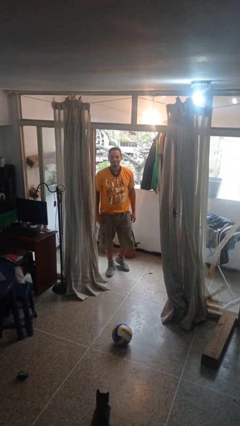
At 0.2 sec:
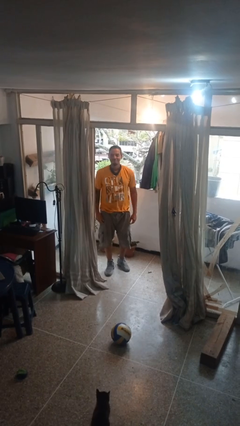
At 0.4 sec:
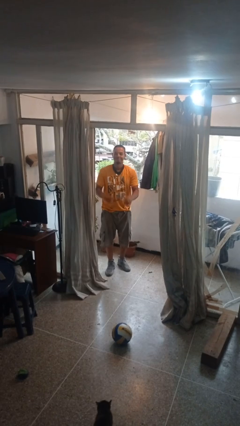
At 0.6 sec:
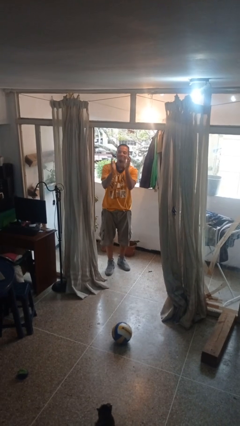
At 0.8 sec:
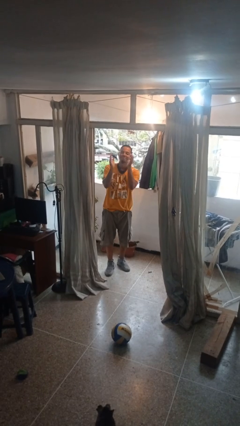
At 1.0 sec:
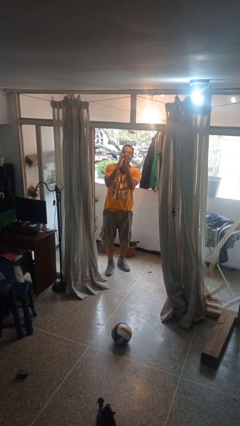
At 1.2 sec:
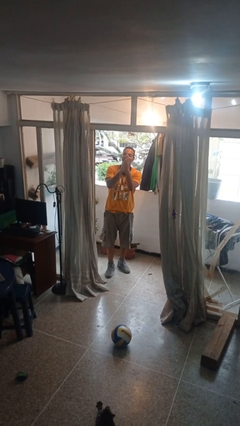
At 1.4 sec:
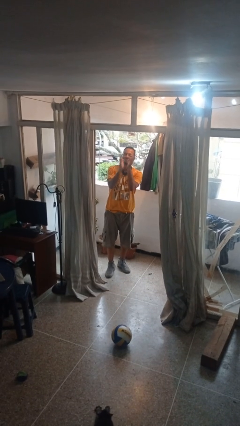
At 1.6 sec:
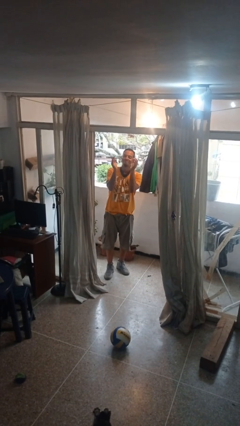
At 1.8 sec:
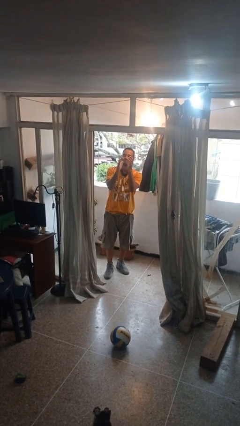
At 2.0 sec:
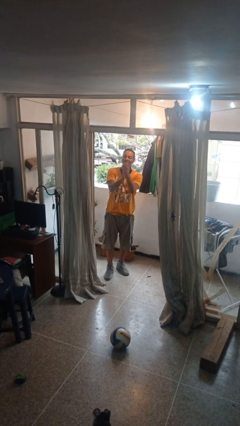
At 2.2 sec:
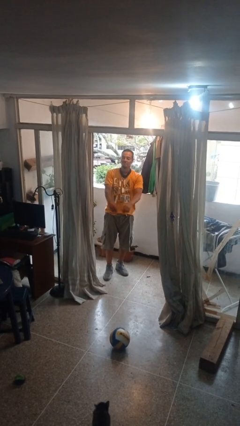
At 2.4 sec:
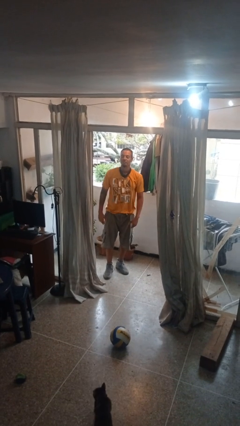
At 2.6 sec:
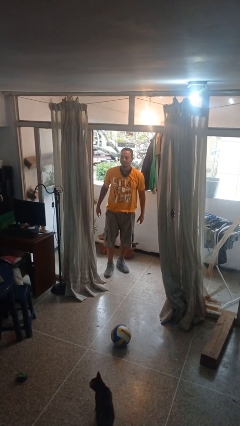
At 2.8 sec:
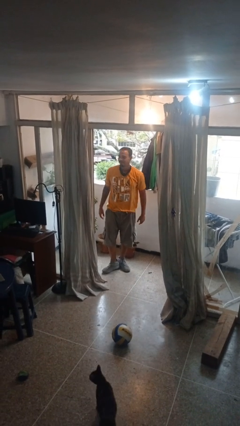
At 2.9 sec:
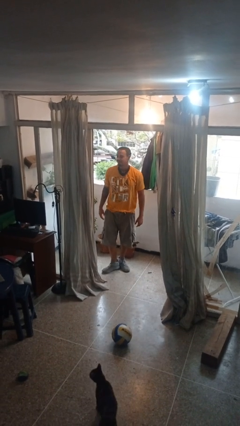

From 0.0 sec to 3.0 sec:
person claps hands

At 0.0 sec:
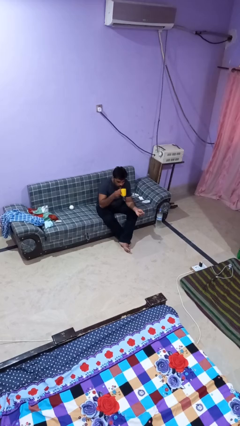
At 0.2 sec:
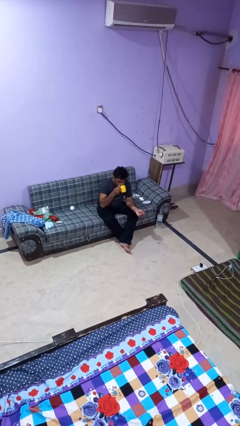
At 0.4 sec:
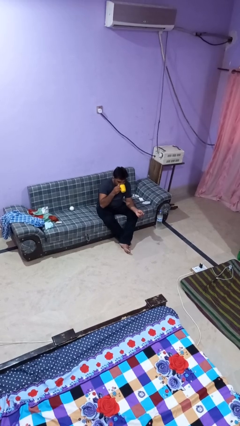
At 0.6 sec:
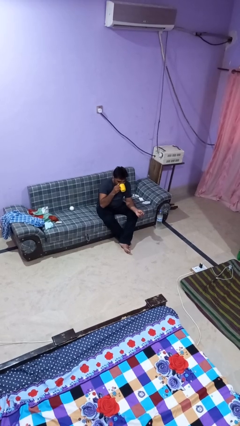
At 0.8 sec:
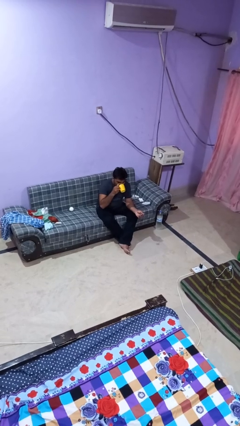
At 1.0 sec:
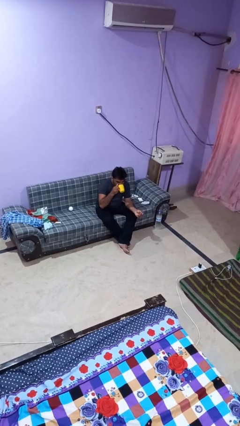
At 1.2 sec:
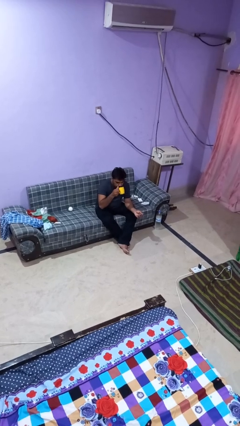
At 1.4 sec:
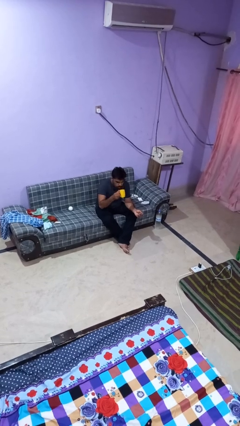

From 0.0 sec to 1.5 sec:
person drinks from mug

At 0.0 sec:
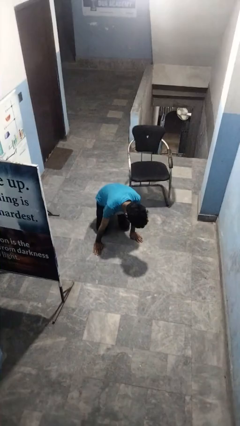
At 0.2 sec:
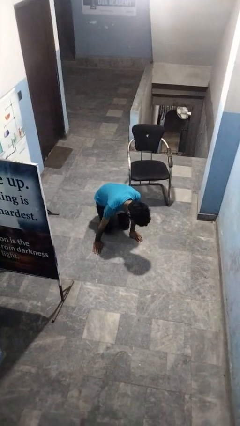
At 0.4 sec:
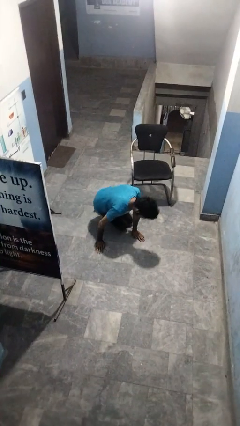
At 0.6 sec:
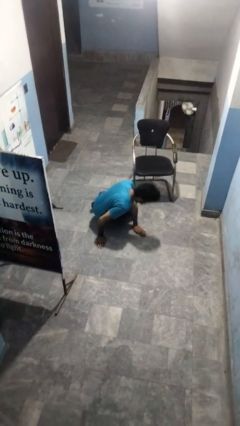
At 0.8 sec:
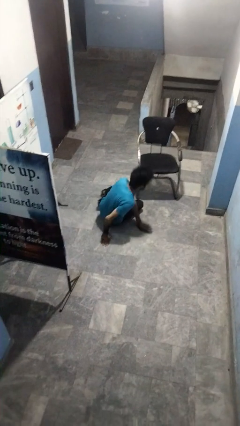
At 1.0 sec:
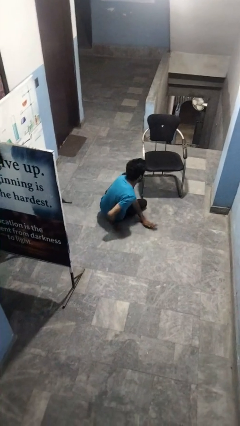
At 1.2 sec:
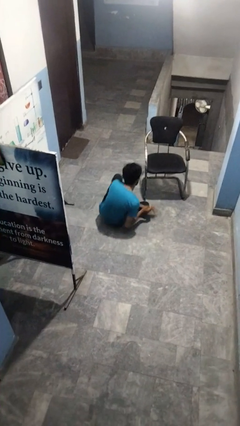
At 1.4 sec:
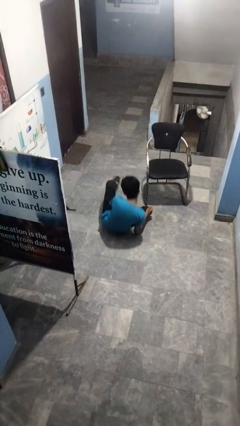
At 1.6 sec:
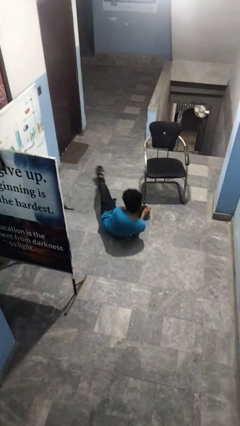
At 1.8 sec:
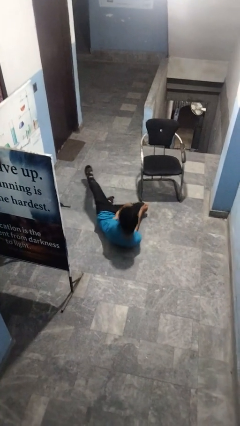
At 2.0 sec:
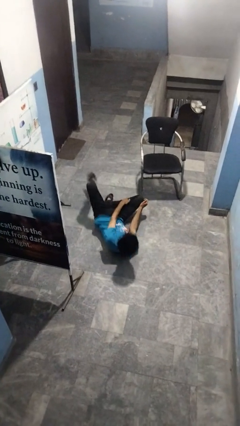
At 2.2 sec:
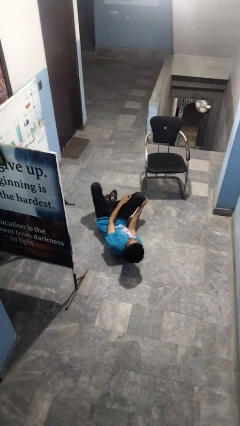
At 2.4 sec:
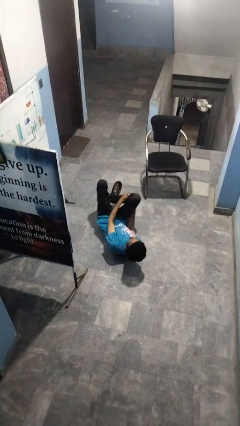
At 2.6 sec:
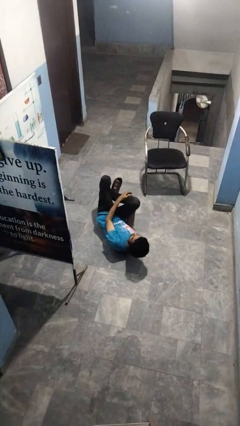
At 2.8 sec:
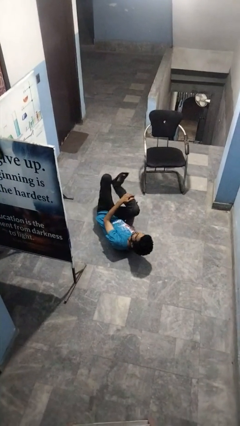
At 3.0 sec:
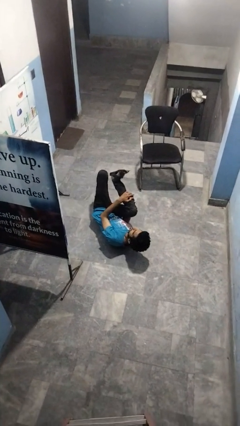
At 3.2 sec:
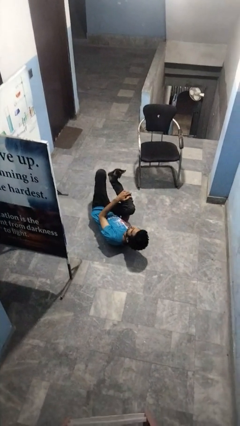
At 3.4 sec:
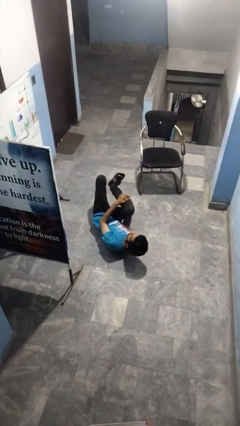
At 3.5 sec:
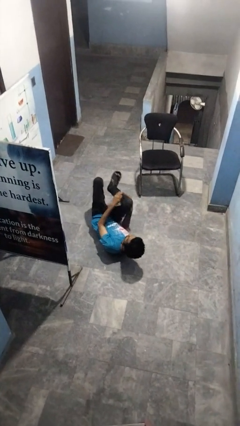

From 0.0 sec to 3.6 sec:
person lies down on floor

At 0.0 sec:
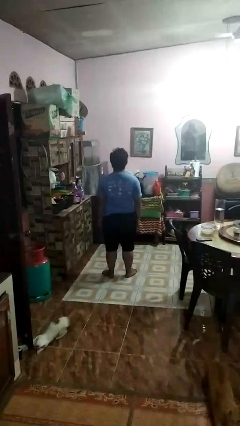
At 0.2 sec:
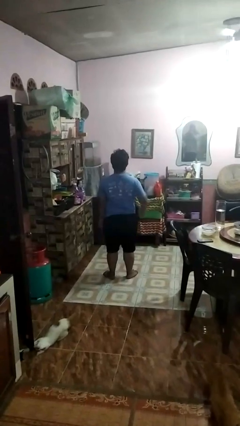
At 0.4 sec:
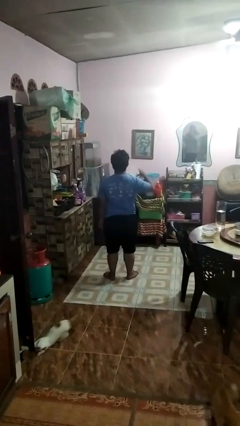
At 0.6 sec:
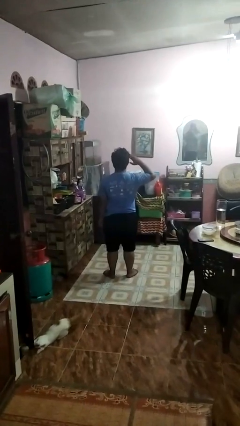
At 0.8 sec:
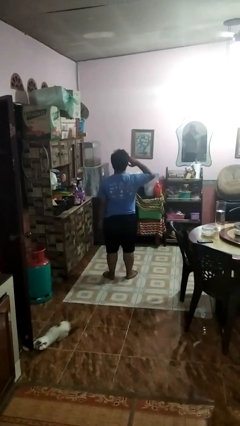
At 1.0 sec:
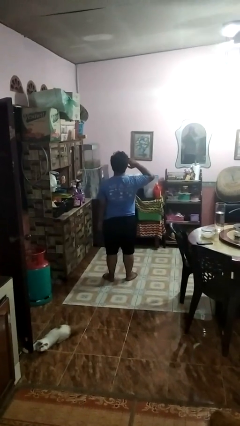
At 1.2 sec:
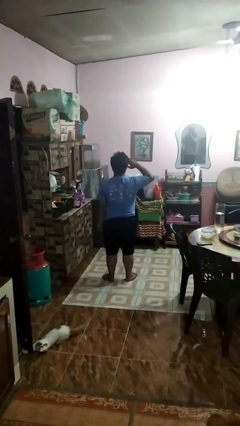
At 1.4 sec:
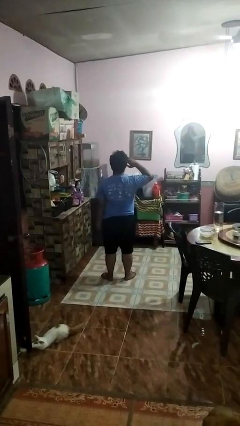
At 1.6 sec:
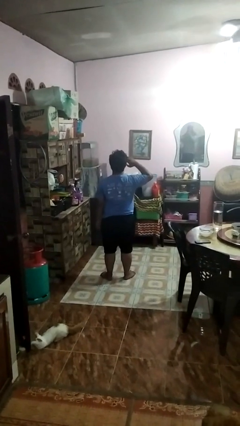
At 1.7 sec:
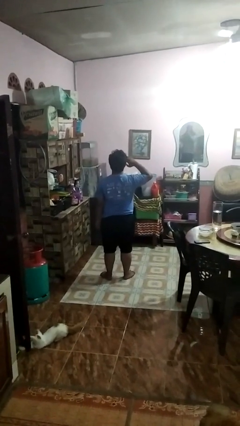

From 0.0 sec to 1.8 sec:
person salutes

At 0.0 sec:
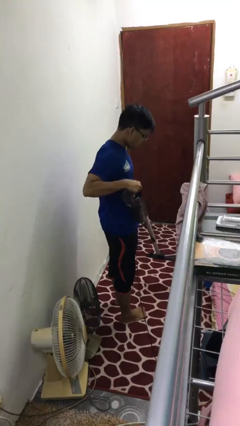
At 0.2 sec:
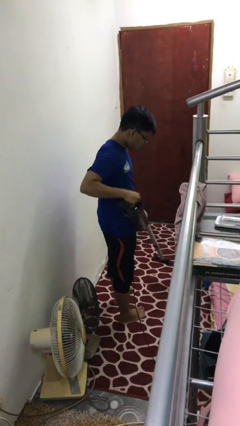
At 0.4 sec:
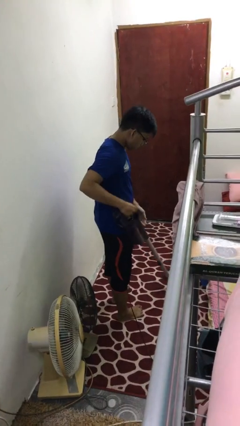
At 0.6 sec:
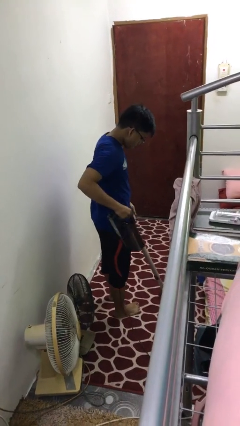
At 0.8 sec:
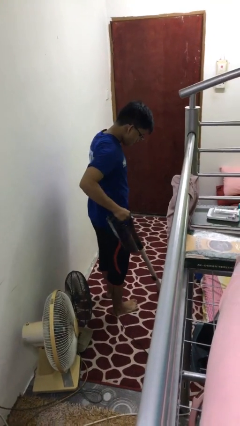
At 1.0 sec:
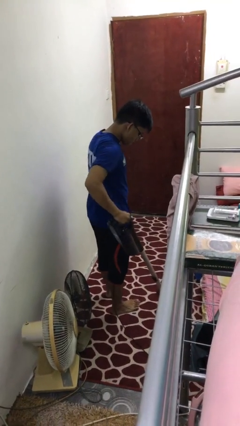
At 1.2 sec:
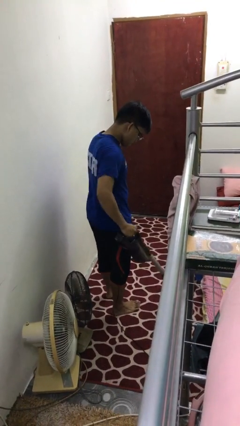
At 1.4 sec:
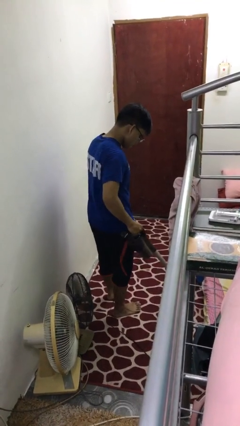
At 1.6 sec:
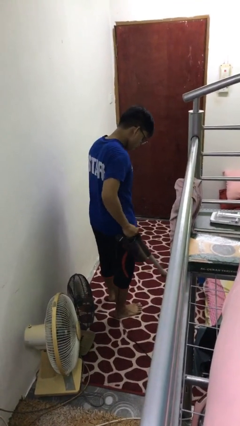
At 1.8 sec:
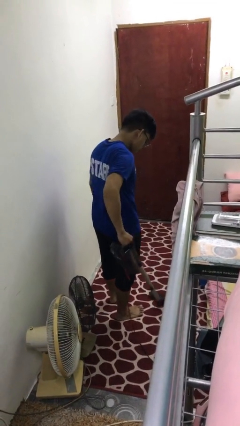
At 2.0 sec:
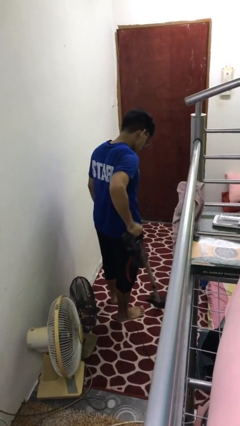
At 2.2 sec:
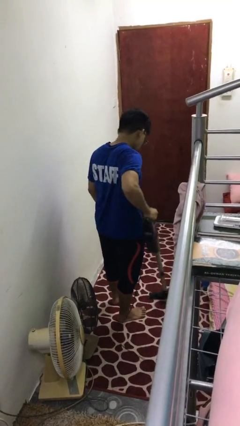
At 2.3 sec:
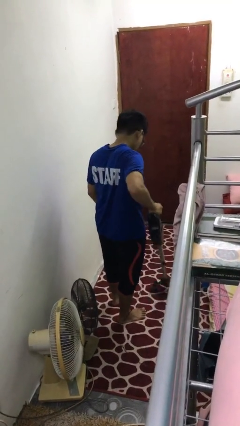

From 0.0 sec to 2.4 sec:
person vacuums carpet

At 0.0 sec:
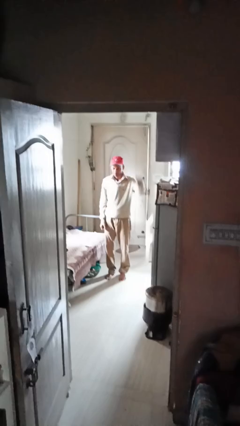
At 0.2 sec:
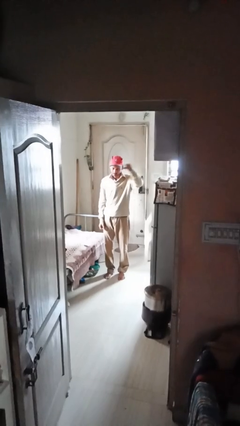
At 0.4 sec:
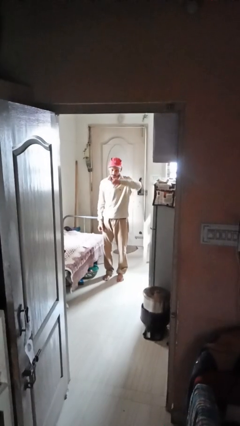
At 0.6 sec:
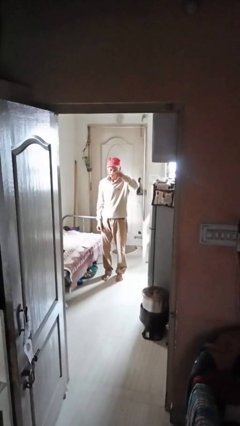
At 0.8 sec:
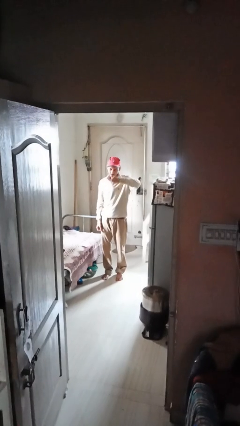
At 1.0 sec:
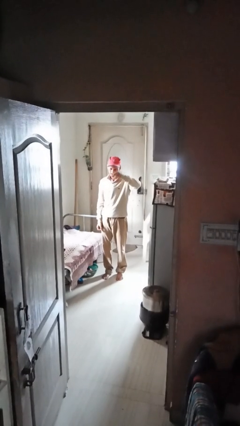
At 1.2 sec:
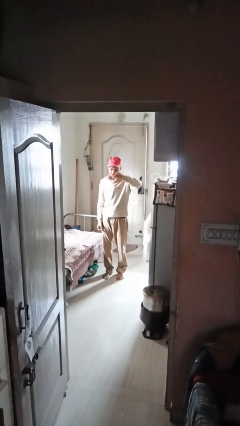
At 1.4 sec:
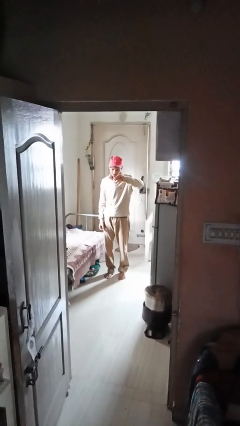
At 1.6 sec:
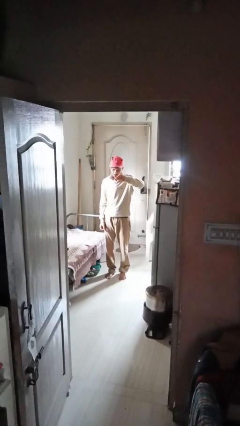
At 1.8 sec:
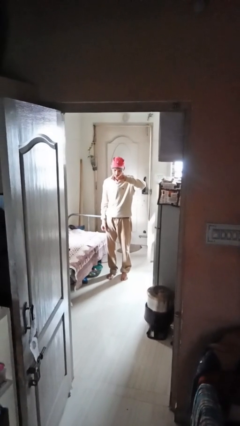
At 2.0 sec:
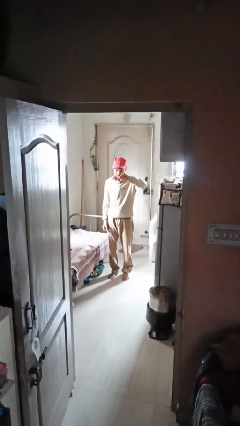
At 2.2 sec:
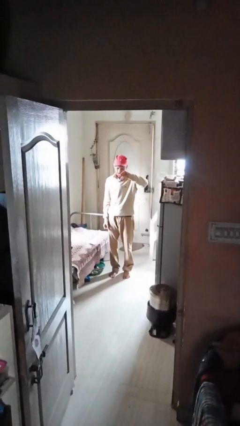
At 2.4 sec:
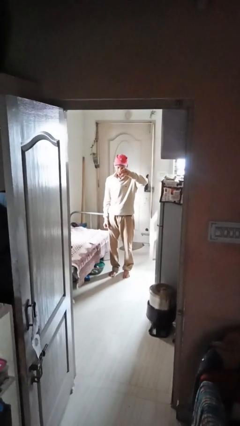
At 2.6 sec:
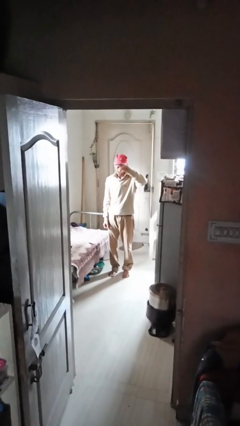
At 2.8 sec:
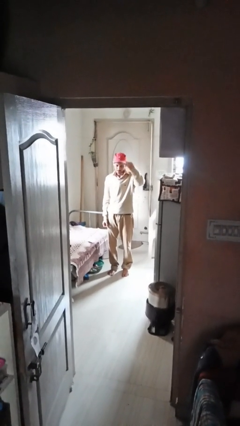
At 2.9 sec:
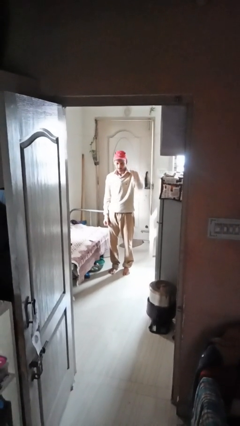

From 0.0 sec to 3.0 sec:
person gestures thumbs down

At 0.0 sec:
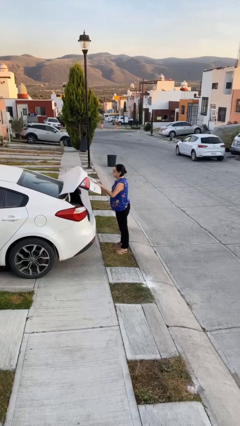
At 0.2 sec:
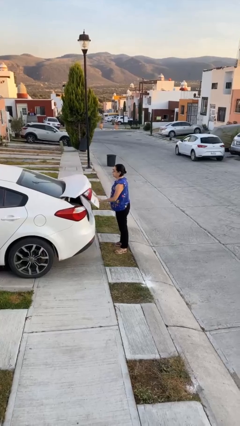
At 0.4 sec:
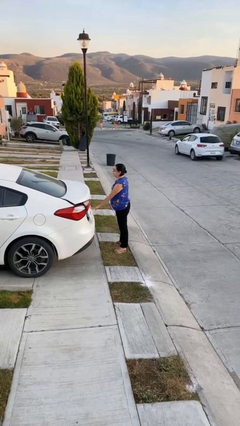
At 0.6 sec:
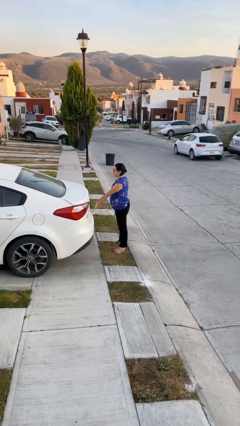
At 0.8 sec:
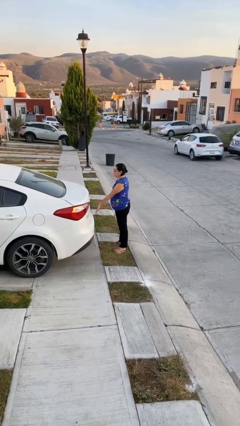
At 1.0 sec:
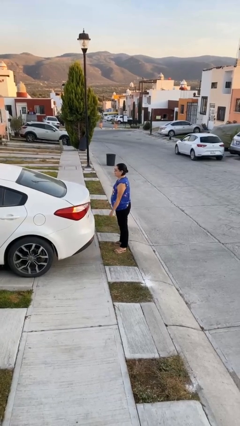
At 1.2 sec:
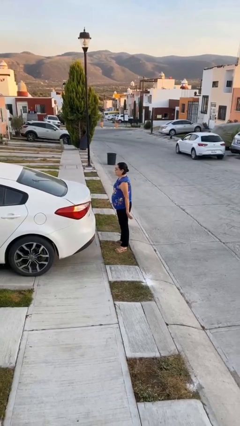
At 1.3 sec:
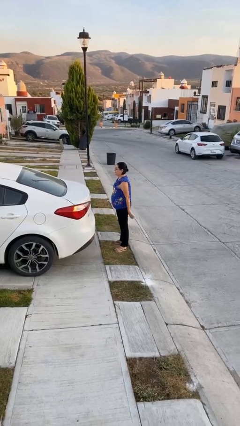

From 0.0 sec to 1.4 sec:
person closes car trunk

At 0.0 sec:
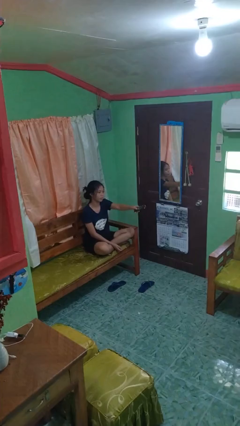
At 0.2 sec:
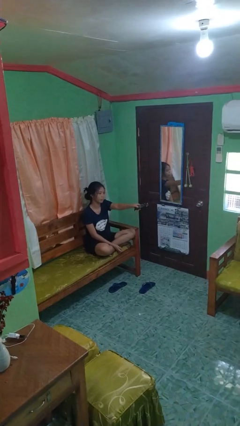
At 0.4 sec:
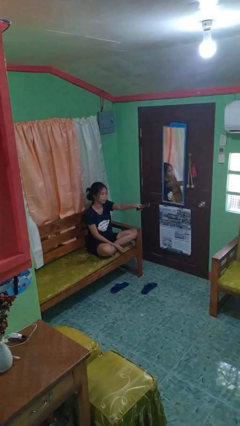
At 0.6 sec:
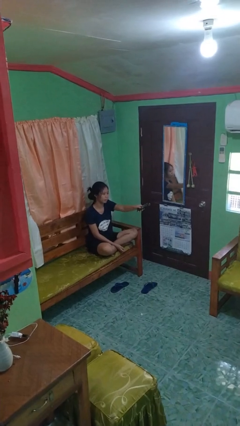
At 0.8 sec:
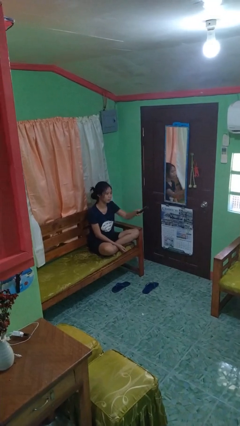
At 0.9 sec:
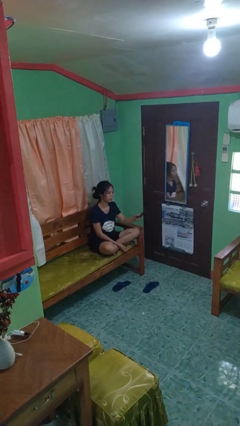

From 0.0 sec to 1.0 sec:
person uses television remote
